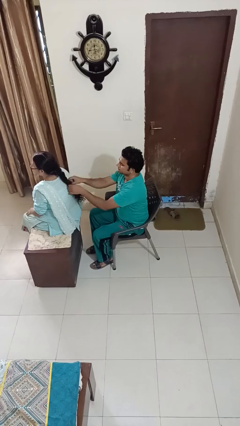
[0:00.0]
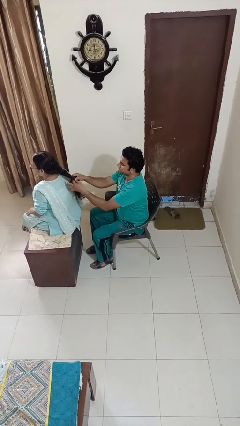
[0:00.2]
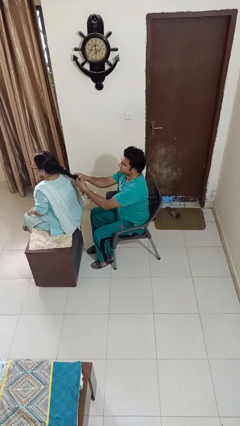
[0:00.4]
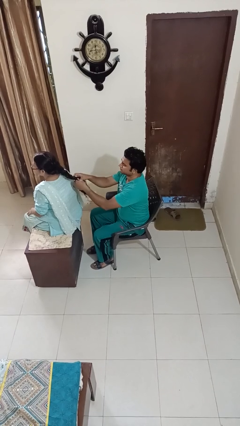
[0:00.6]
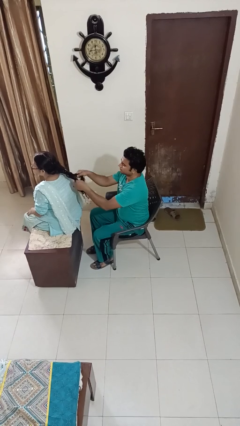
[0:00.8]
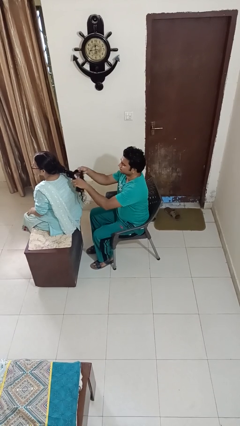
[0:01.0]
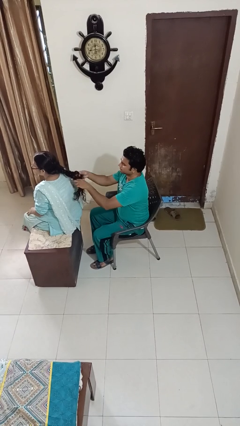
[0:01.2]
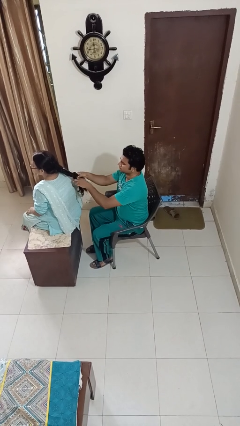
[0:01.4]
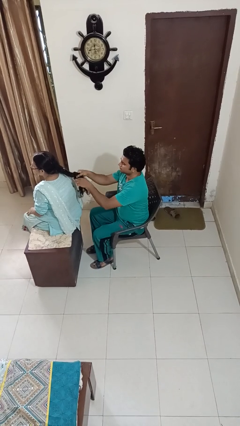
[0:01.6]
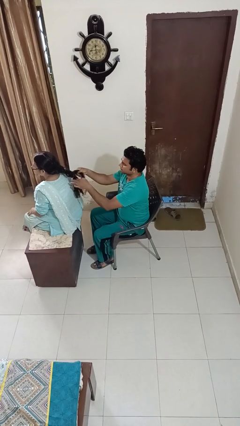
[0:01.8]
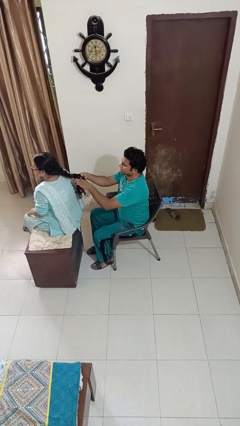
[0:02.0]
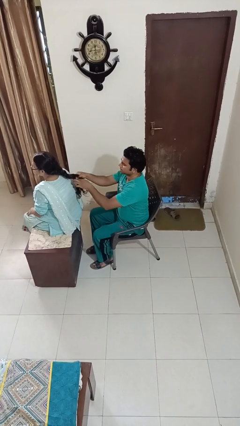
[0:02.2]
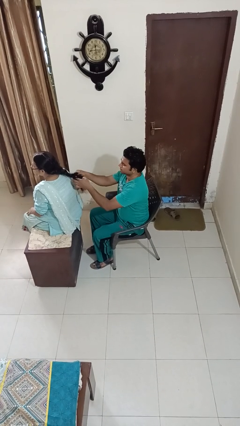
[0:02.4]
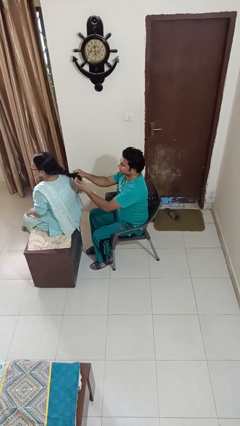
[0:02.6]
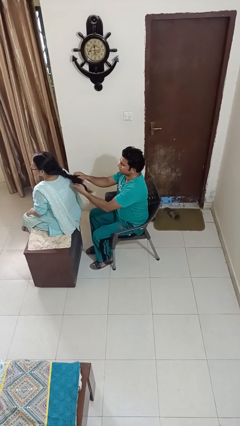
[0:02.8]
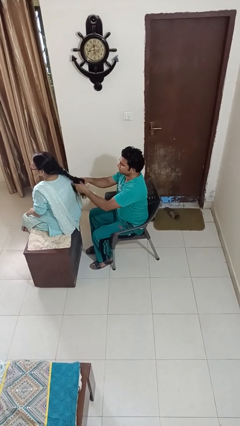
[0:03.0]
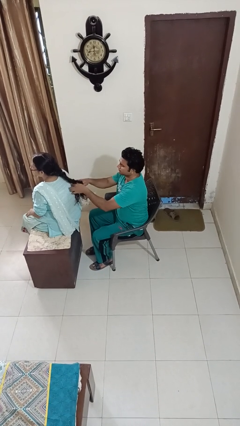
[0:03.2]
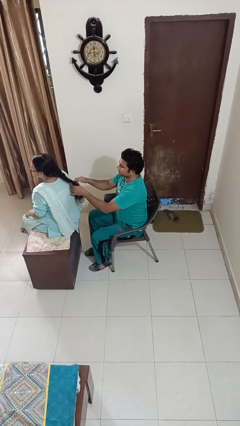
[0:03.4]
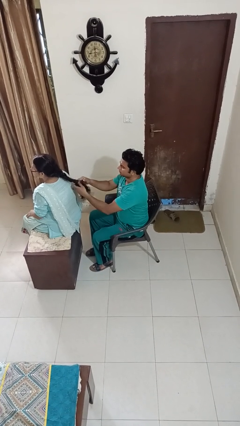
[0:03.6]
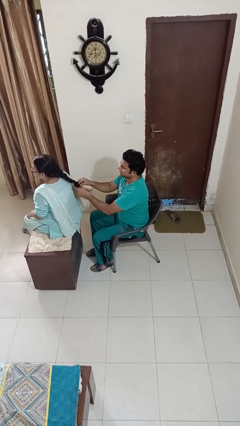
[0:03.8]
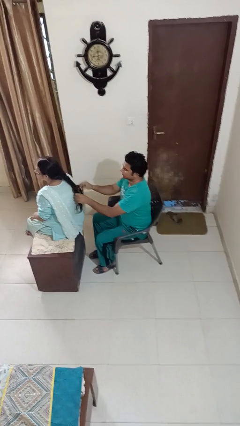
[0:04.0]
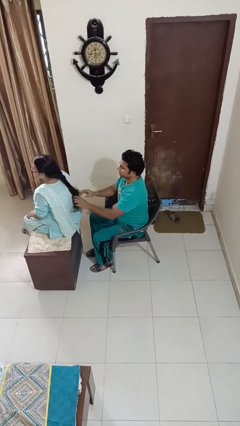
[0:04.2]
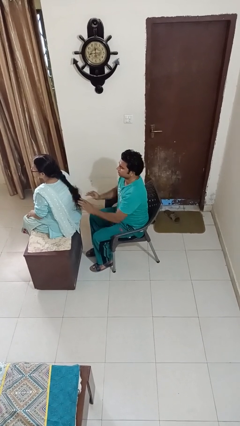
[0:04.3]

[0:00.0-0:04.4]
person braids hair of person

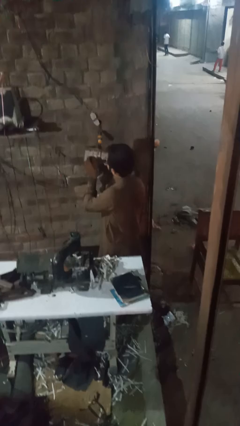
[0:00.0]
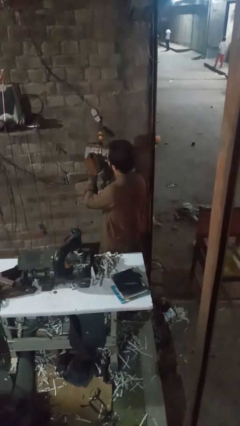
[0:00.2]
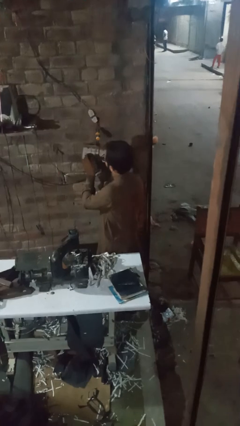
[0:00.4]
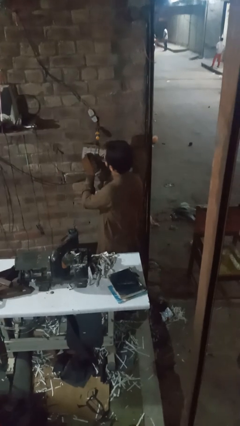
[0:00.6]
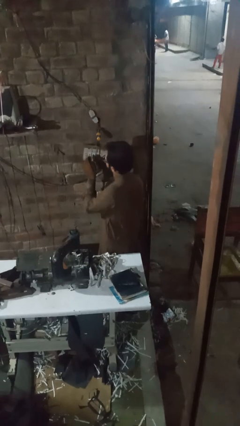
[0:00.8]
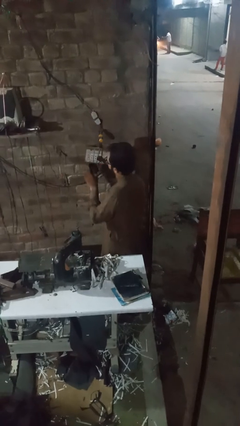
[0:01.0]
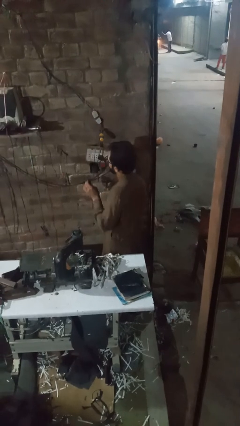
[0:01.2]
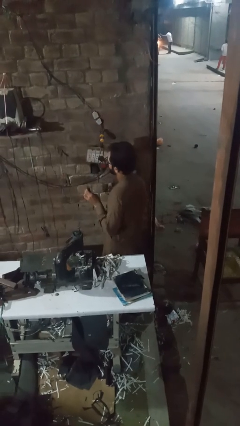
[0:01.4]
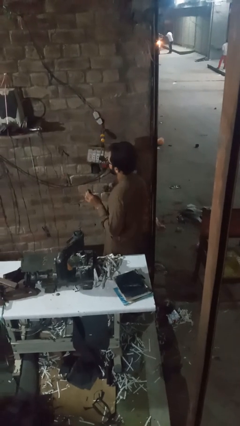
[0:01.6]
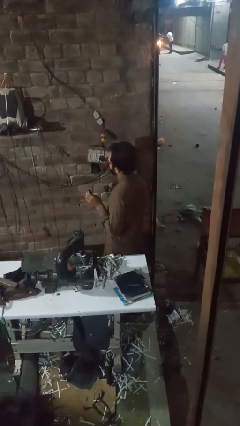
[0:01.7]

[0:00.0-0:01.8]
person unplugs from electrical socket

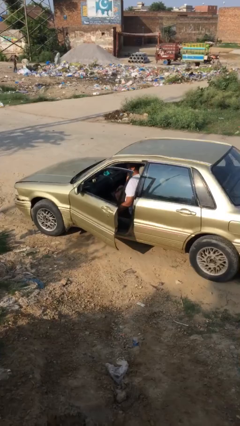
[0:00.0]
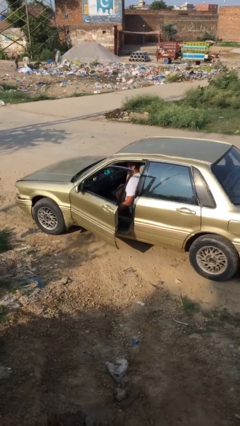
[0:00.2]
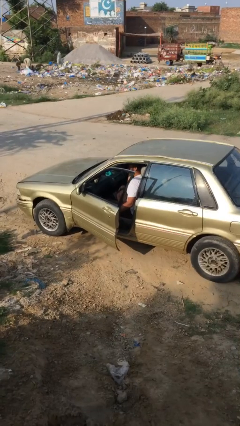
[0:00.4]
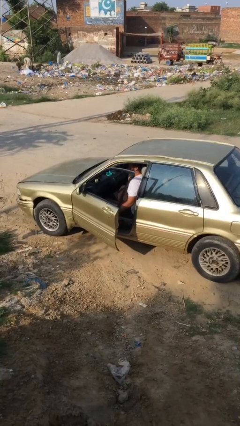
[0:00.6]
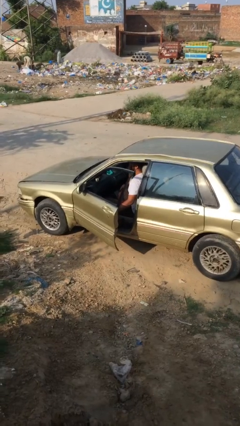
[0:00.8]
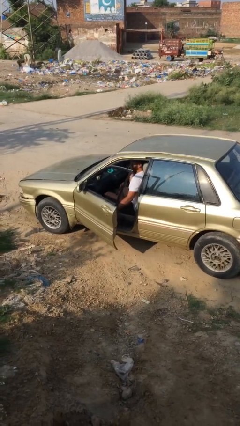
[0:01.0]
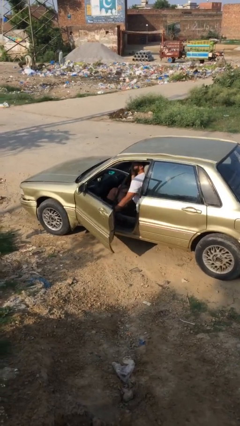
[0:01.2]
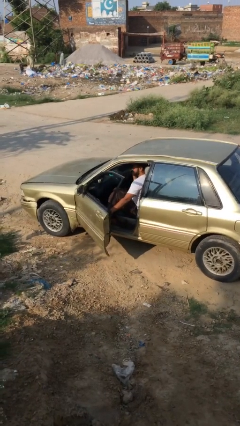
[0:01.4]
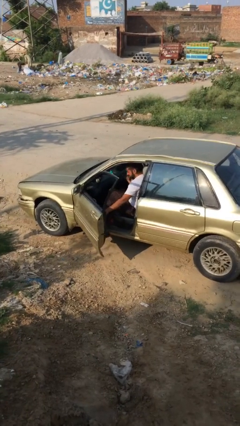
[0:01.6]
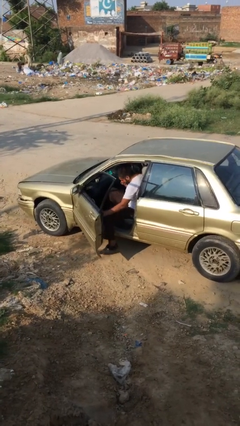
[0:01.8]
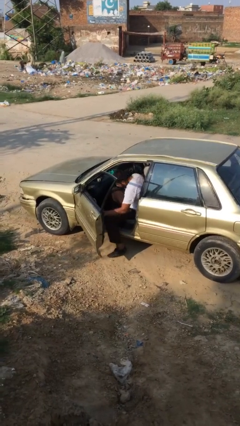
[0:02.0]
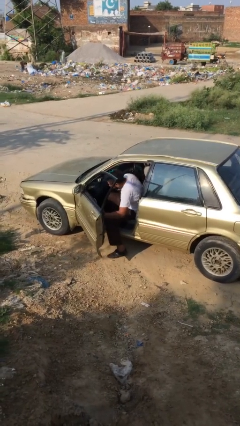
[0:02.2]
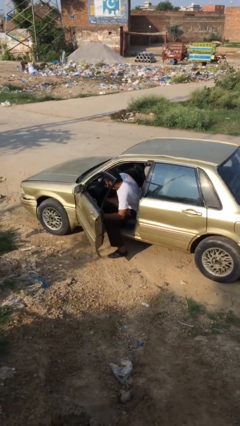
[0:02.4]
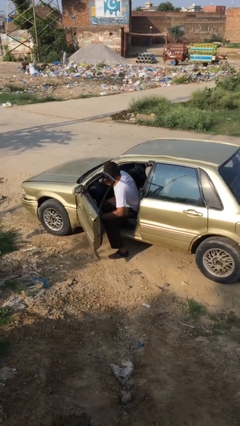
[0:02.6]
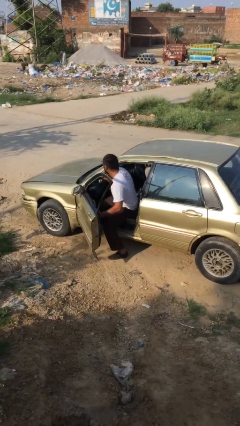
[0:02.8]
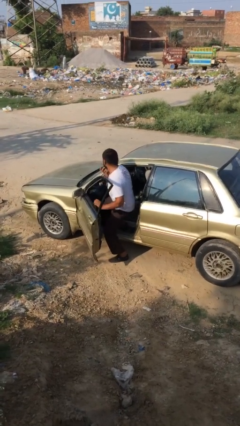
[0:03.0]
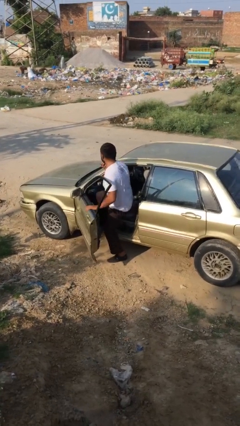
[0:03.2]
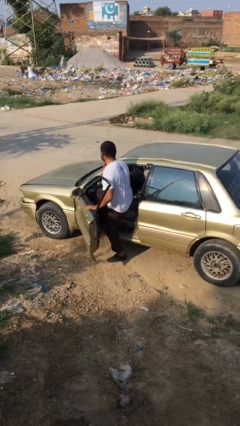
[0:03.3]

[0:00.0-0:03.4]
person exits car

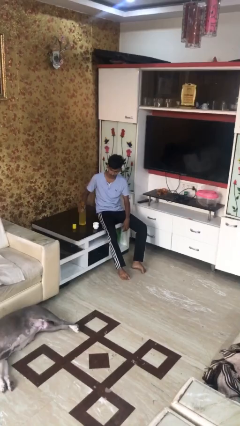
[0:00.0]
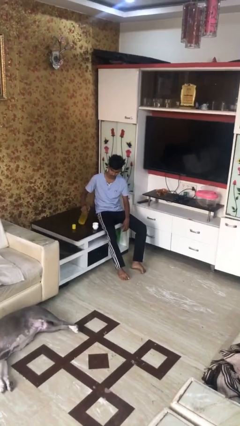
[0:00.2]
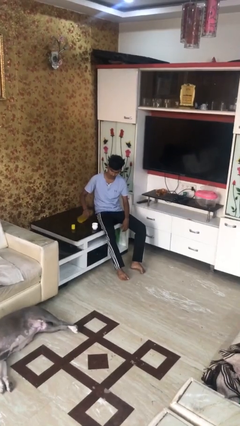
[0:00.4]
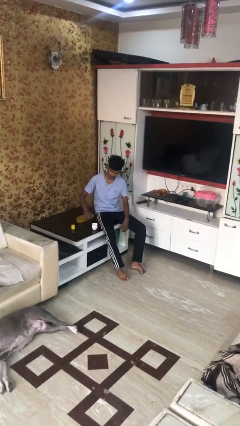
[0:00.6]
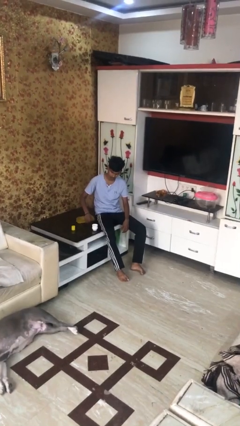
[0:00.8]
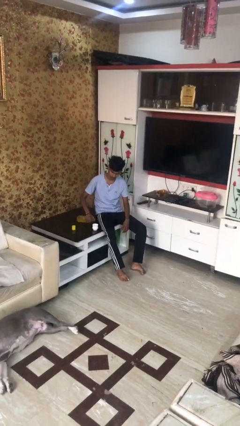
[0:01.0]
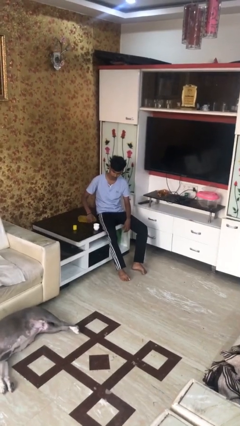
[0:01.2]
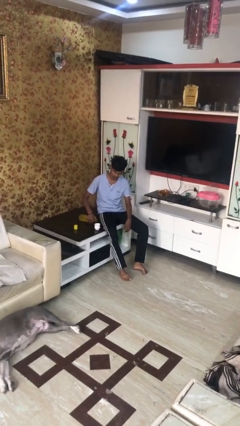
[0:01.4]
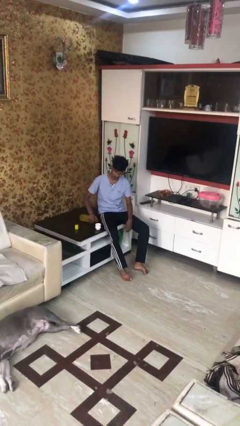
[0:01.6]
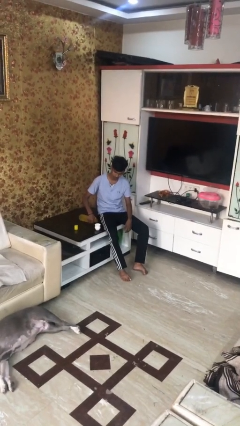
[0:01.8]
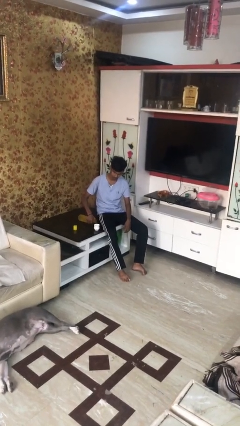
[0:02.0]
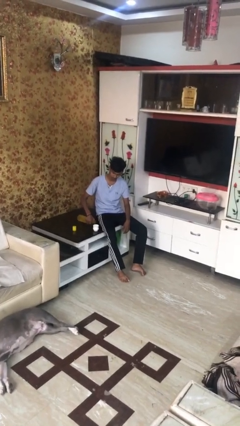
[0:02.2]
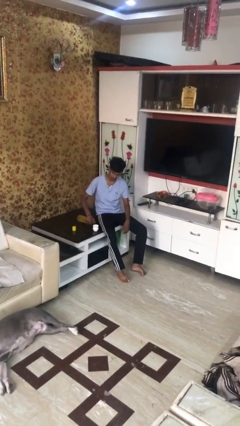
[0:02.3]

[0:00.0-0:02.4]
person pours liquid into cup

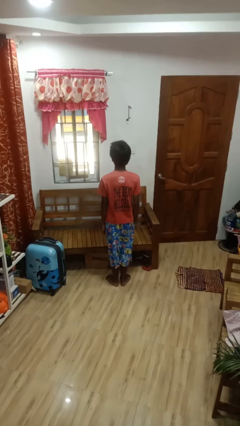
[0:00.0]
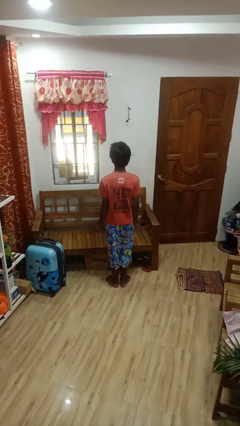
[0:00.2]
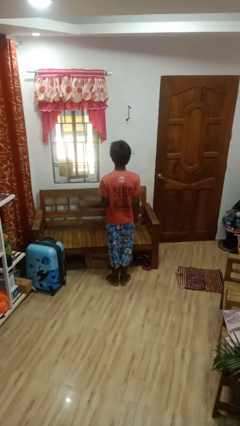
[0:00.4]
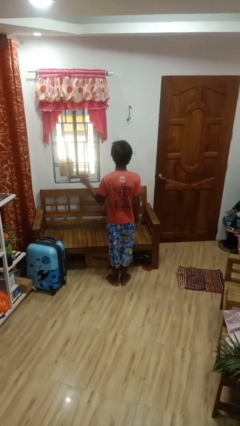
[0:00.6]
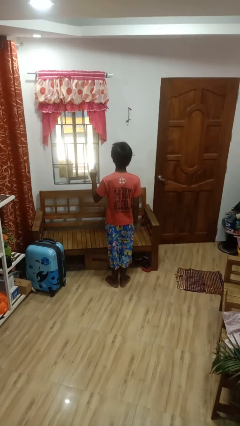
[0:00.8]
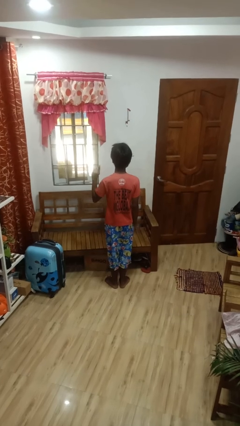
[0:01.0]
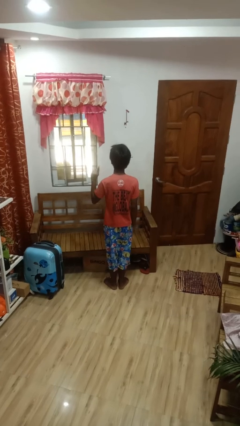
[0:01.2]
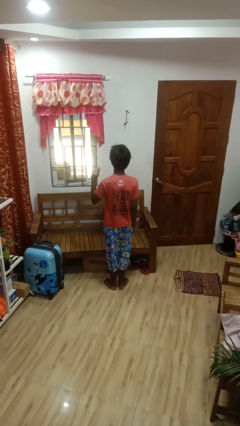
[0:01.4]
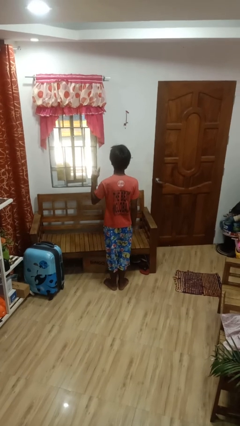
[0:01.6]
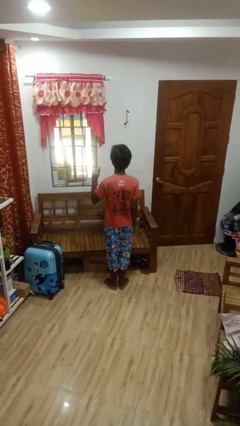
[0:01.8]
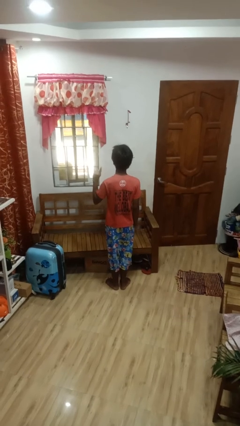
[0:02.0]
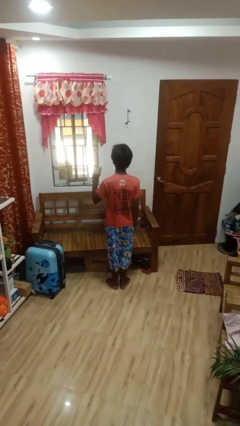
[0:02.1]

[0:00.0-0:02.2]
person gestures number one

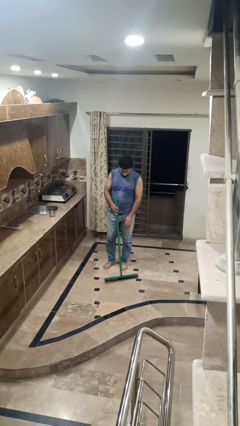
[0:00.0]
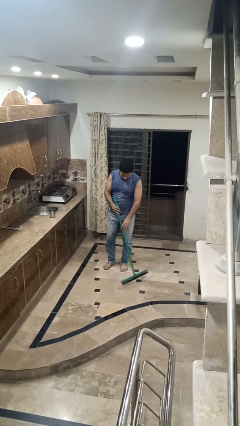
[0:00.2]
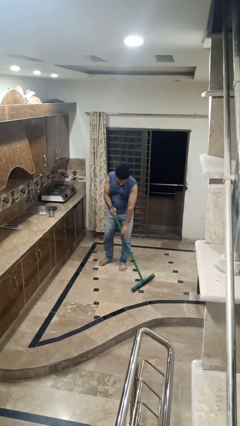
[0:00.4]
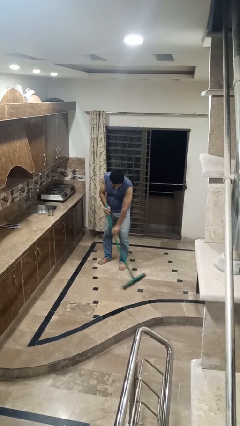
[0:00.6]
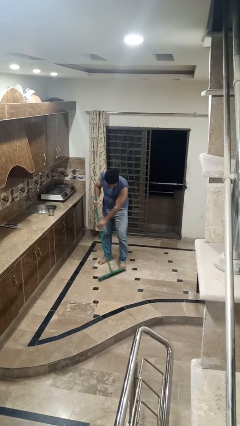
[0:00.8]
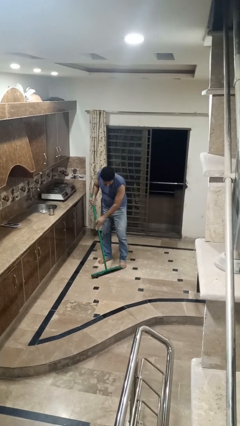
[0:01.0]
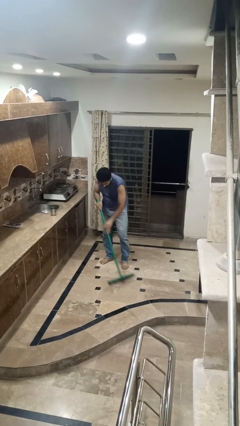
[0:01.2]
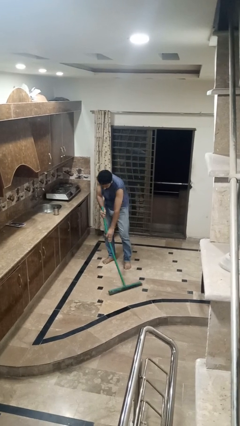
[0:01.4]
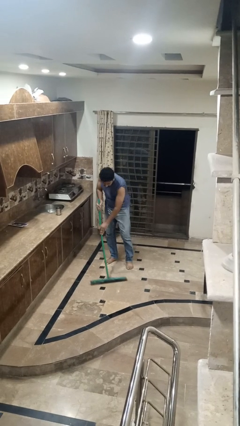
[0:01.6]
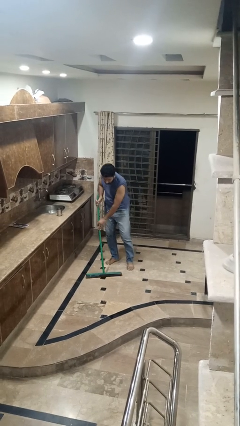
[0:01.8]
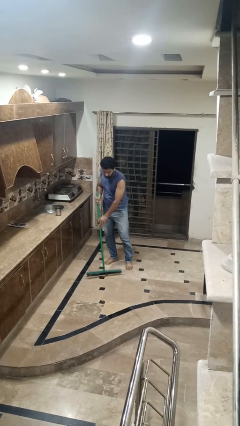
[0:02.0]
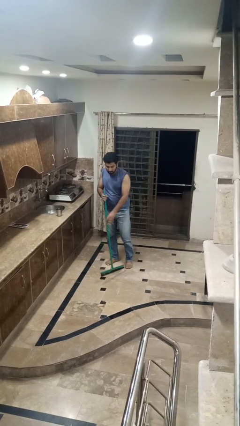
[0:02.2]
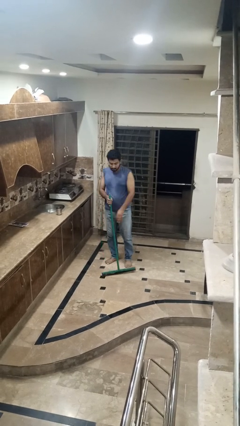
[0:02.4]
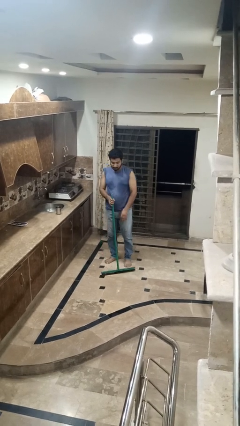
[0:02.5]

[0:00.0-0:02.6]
person mops
